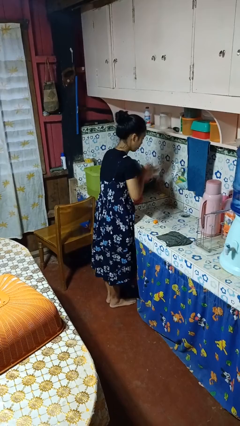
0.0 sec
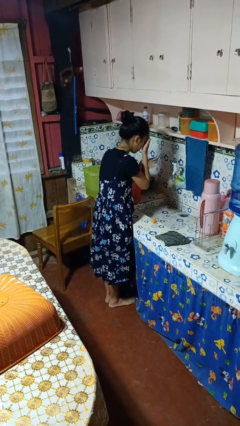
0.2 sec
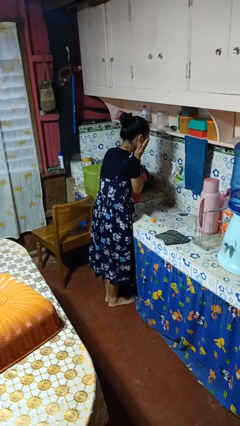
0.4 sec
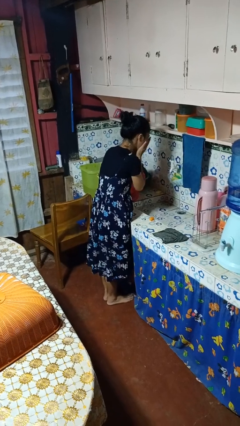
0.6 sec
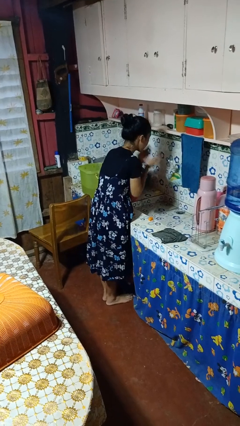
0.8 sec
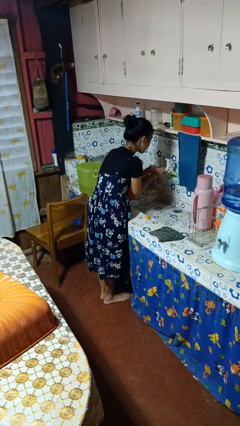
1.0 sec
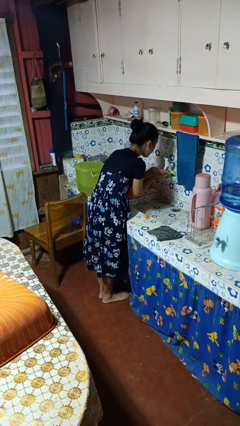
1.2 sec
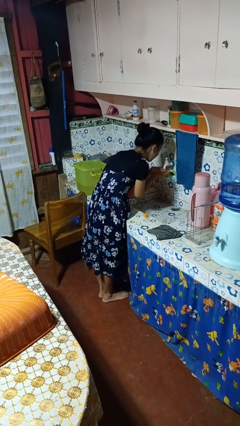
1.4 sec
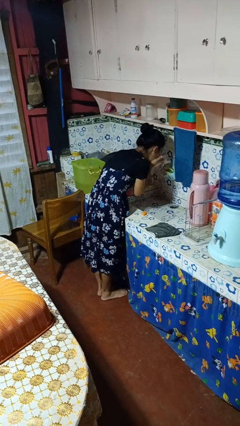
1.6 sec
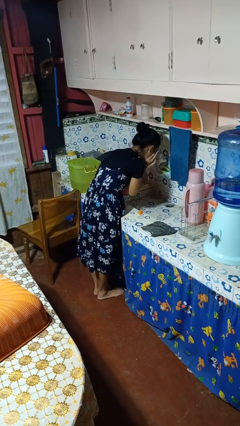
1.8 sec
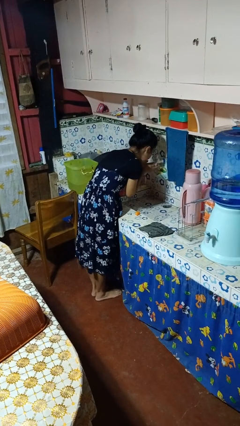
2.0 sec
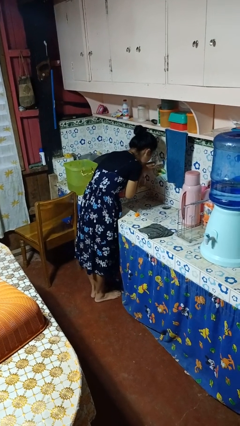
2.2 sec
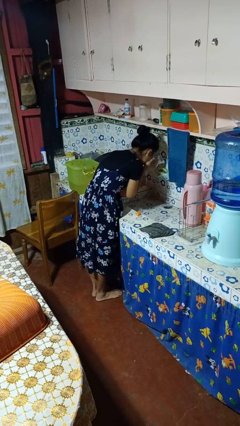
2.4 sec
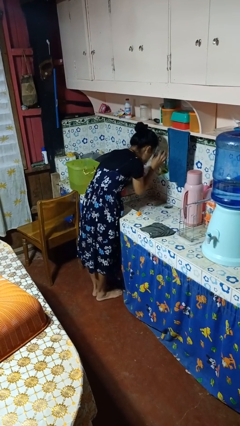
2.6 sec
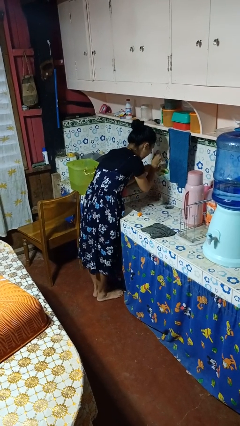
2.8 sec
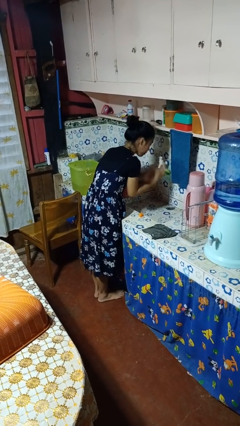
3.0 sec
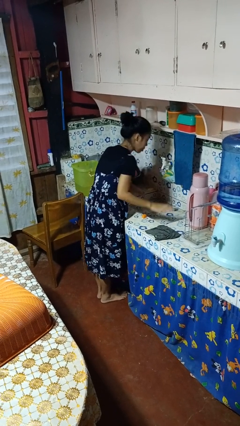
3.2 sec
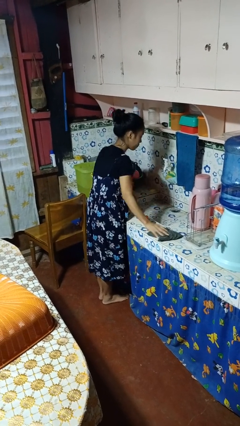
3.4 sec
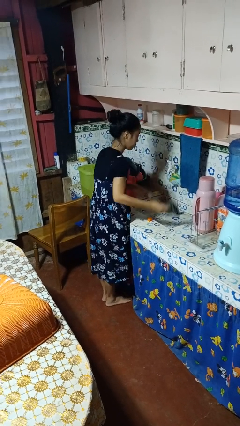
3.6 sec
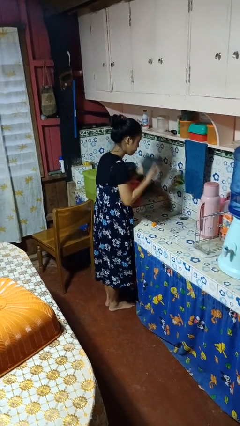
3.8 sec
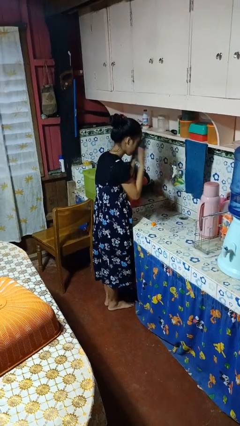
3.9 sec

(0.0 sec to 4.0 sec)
person washes face

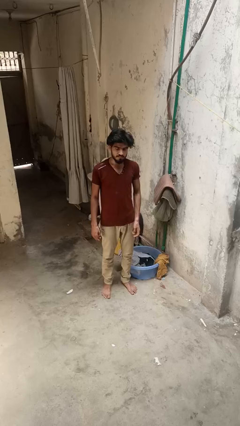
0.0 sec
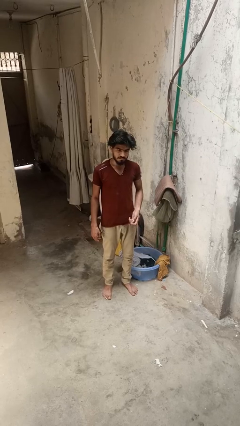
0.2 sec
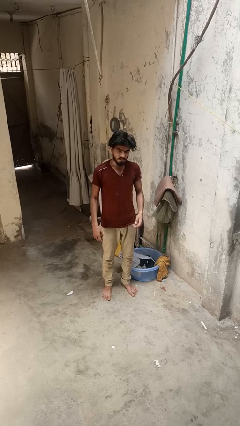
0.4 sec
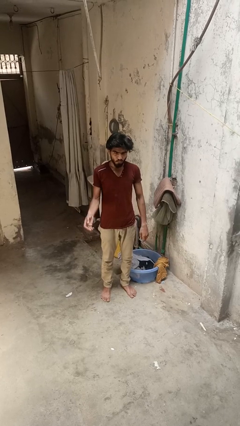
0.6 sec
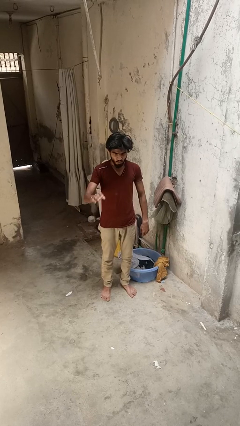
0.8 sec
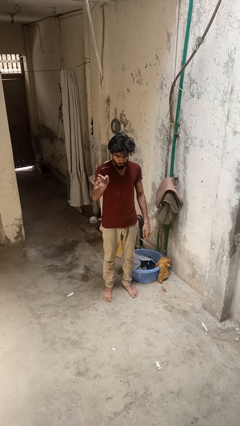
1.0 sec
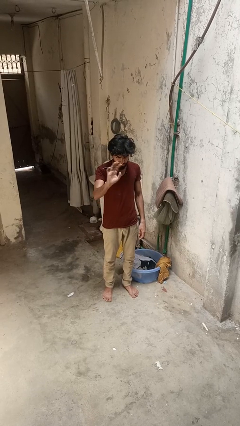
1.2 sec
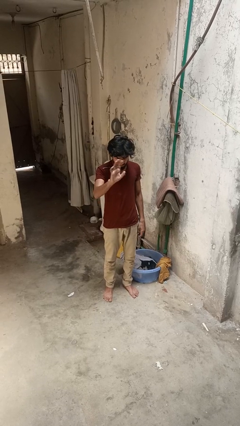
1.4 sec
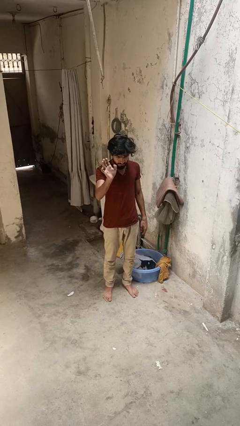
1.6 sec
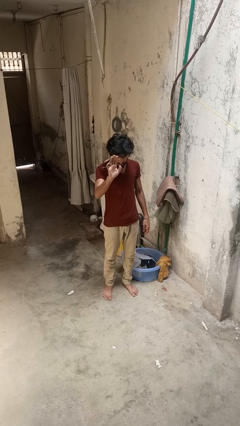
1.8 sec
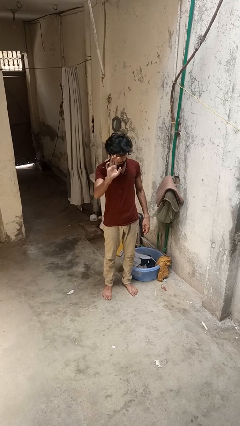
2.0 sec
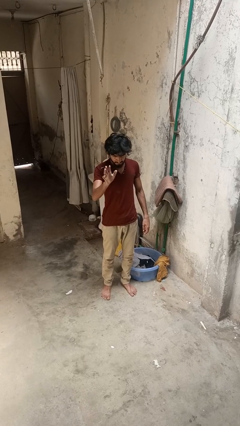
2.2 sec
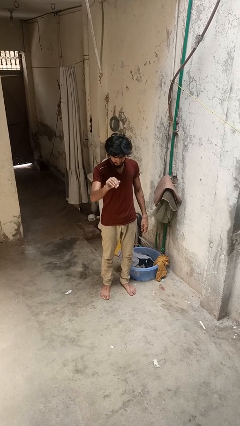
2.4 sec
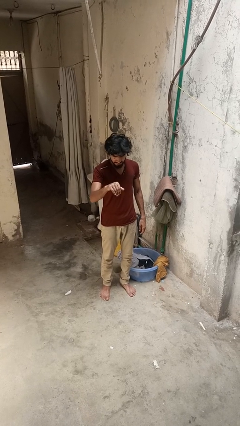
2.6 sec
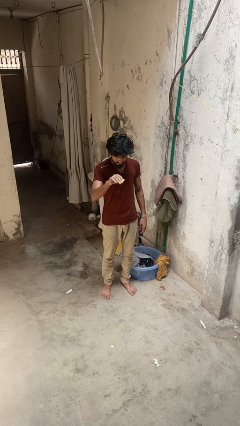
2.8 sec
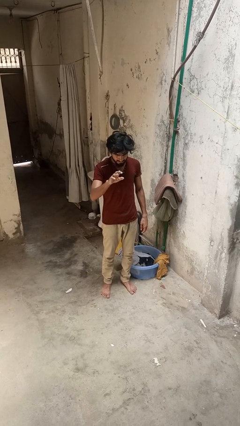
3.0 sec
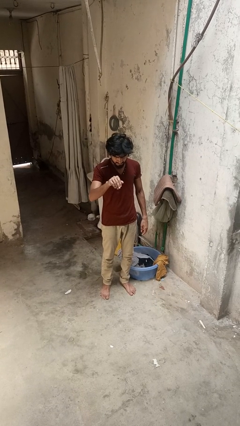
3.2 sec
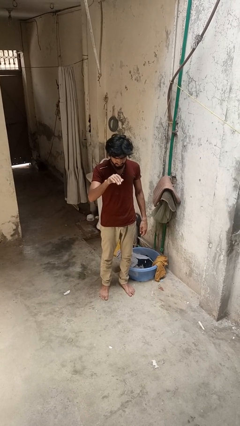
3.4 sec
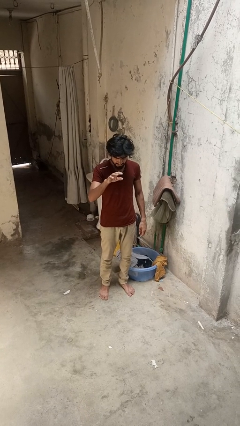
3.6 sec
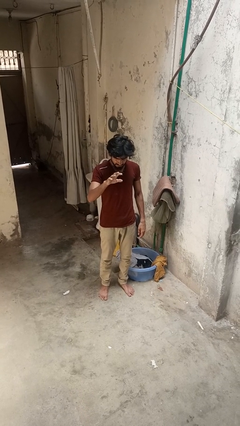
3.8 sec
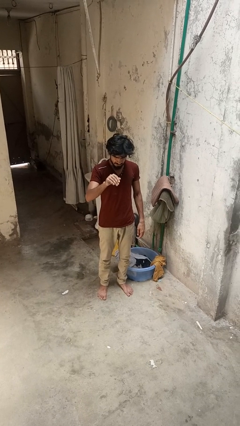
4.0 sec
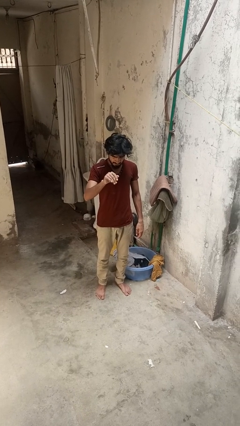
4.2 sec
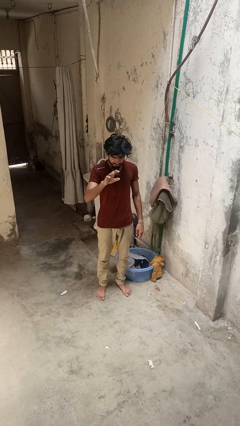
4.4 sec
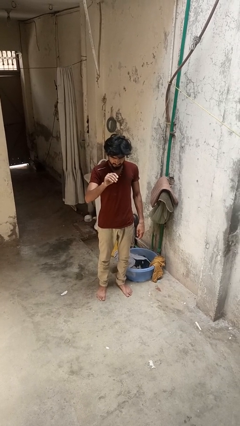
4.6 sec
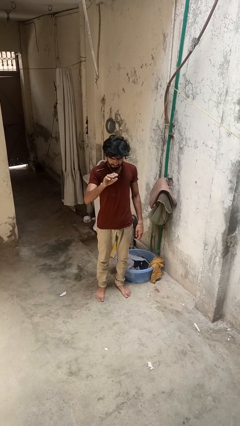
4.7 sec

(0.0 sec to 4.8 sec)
person gestures come here

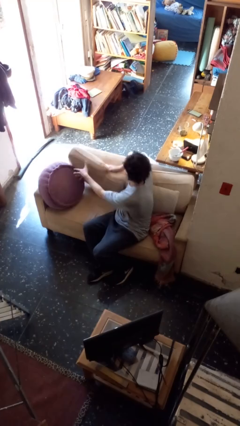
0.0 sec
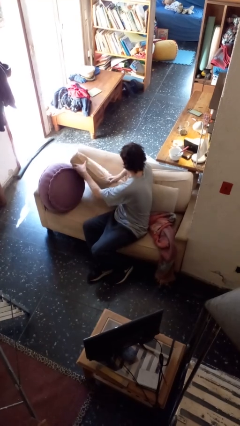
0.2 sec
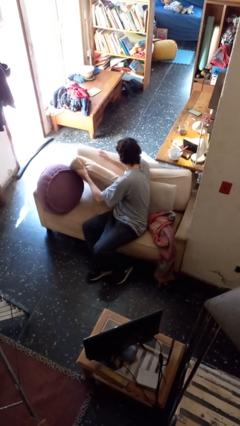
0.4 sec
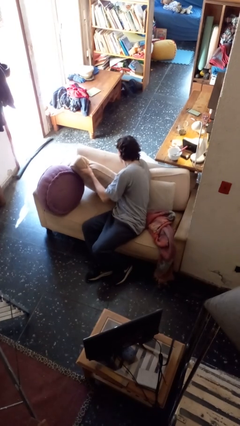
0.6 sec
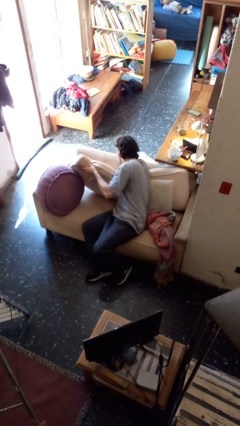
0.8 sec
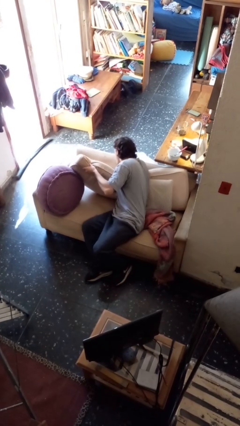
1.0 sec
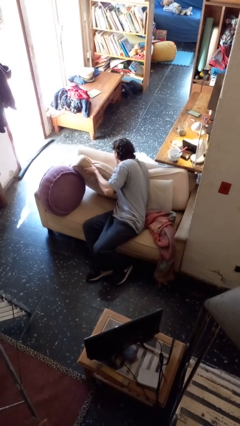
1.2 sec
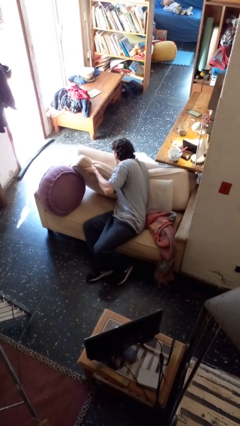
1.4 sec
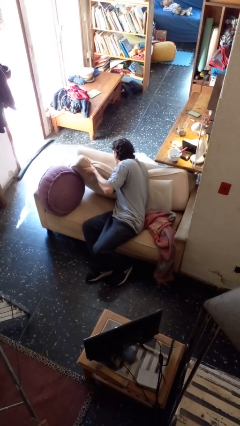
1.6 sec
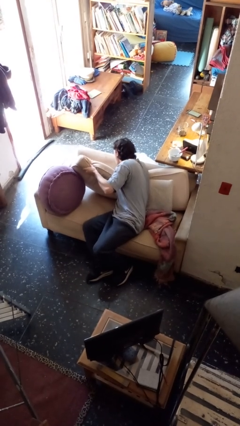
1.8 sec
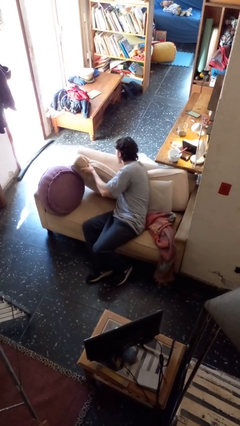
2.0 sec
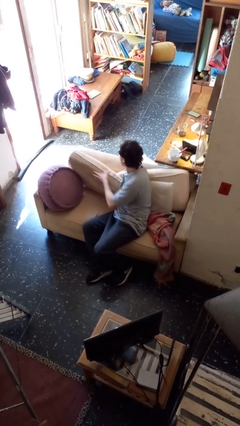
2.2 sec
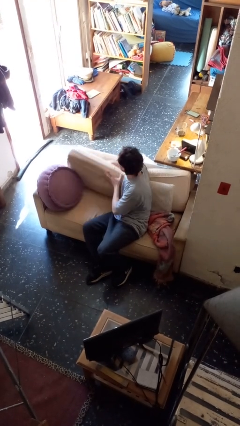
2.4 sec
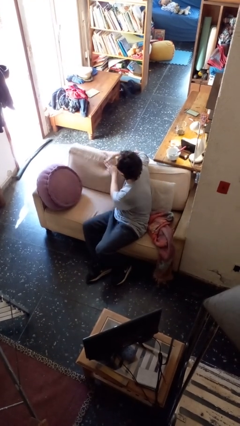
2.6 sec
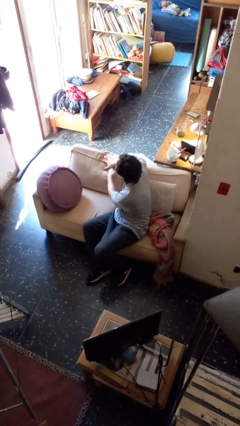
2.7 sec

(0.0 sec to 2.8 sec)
person searches in couch

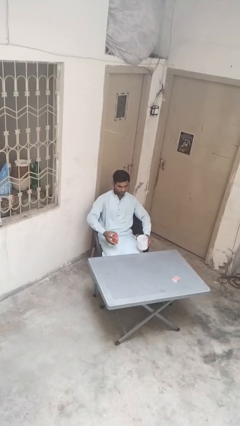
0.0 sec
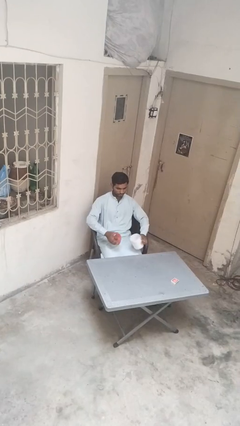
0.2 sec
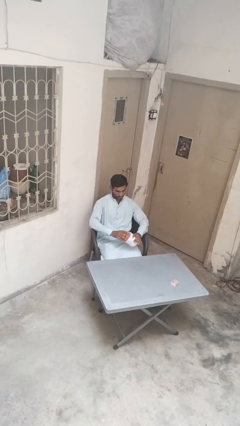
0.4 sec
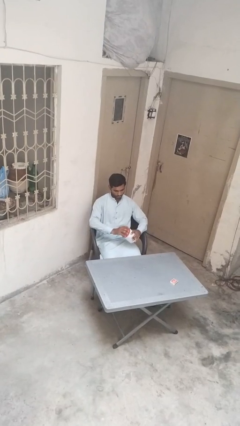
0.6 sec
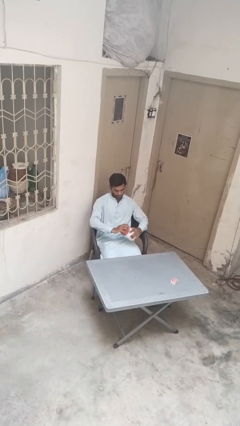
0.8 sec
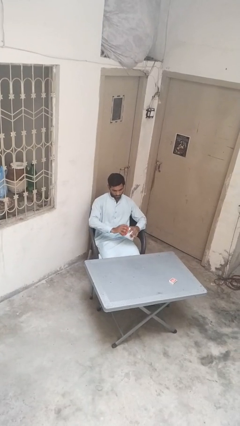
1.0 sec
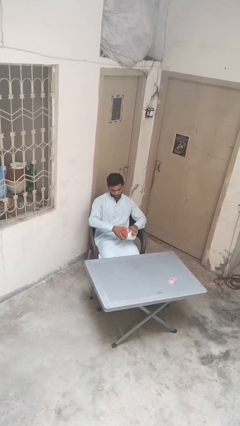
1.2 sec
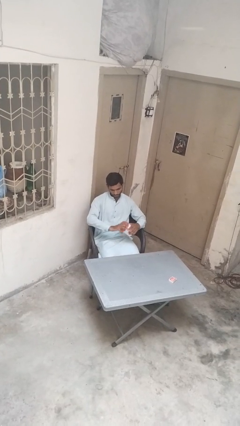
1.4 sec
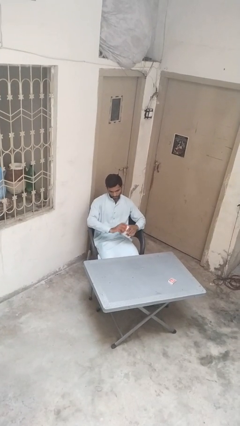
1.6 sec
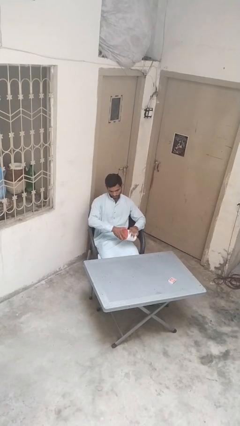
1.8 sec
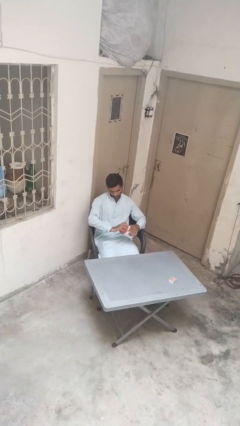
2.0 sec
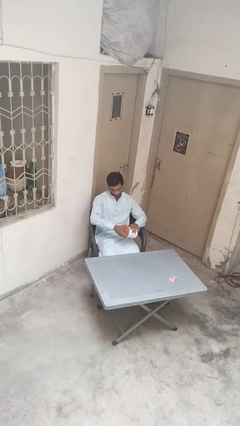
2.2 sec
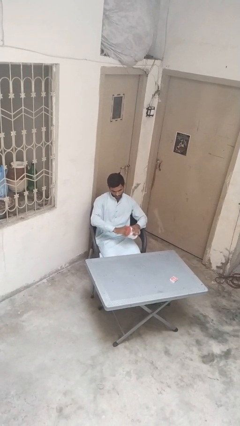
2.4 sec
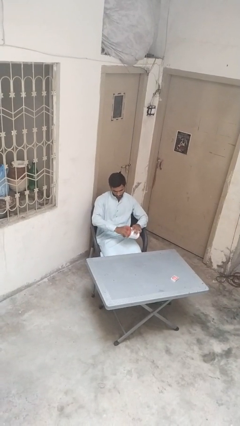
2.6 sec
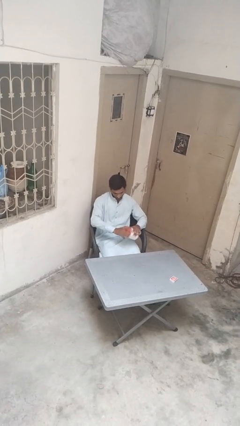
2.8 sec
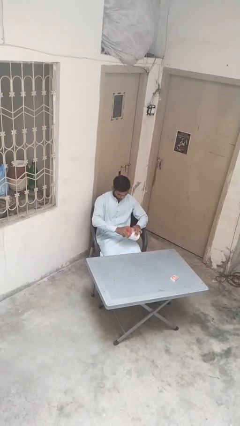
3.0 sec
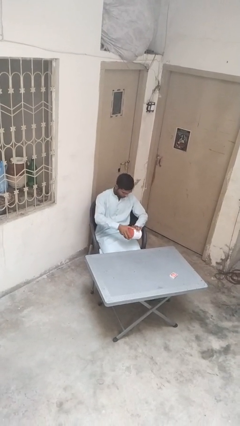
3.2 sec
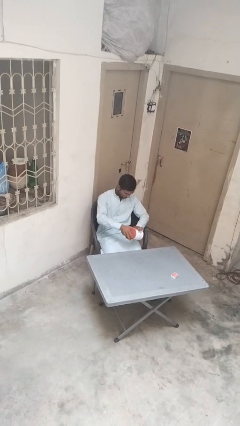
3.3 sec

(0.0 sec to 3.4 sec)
person closes jar

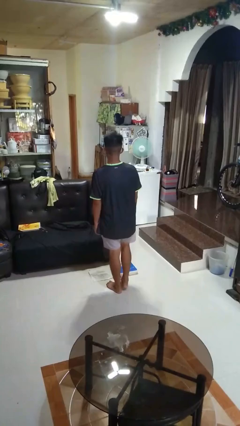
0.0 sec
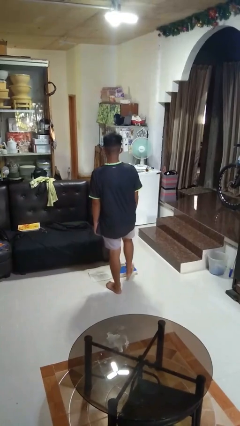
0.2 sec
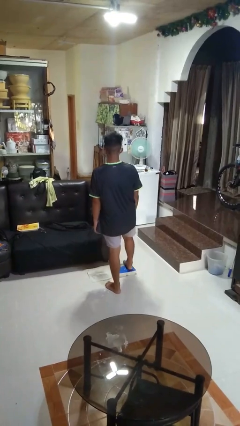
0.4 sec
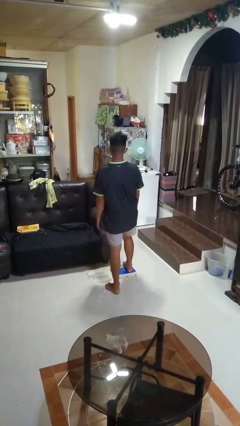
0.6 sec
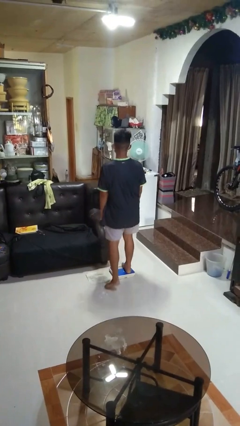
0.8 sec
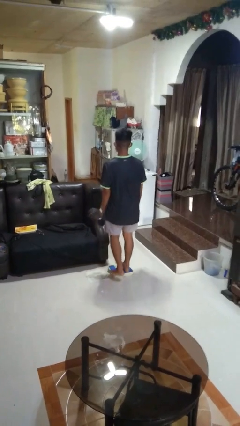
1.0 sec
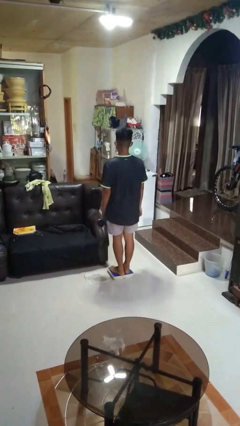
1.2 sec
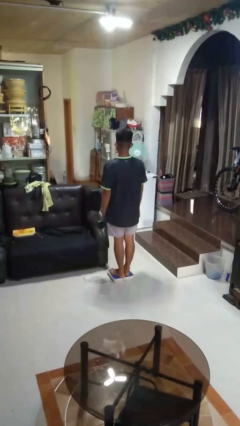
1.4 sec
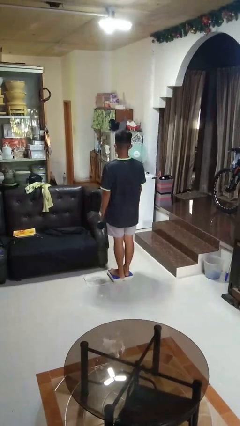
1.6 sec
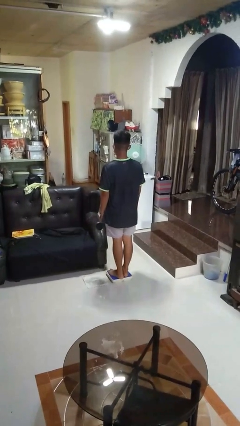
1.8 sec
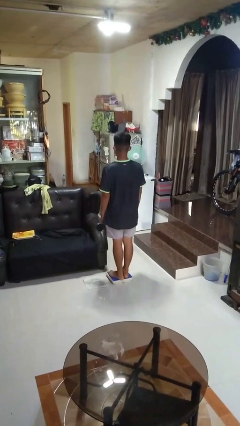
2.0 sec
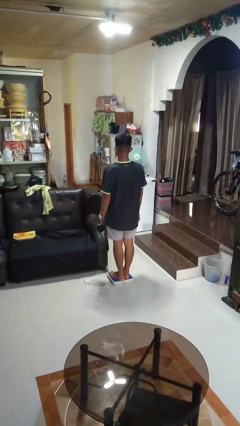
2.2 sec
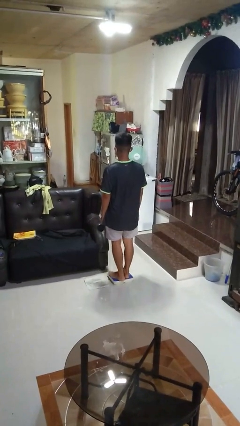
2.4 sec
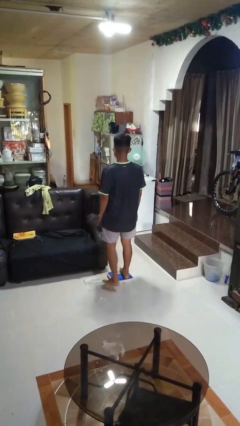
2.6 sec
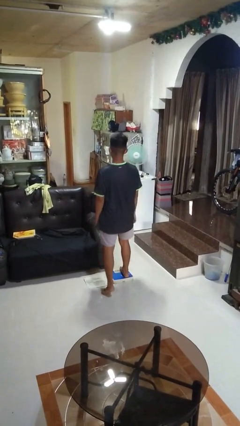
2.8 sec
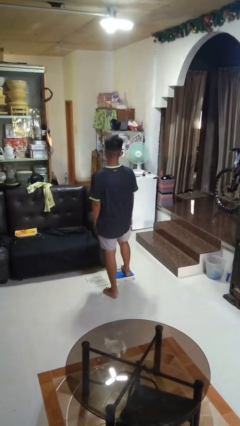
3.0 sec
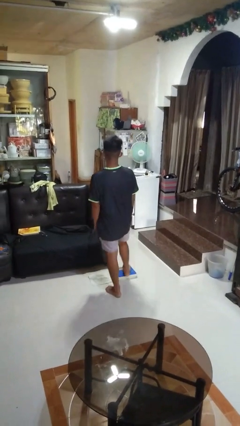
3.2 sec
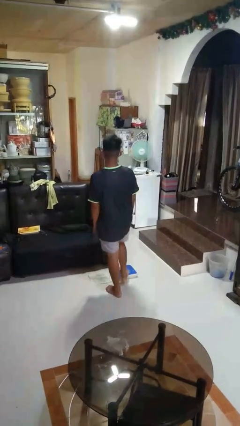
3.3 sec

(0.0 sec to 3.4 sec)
person uses bodyweight scale
